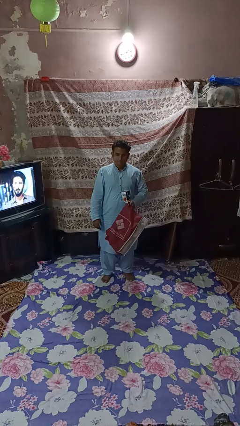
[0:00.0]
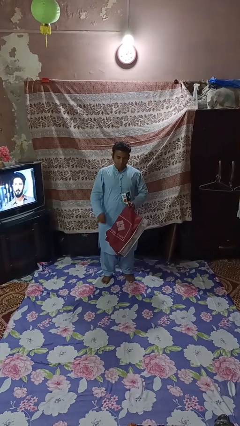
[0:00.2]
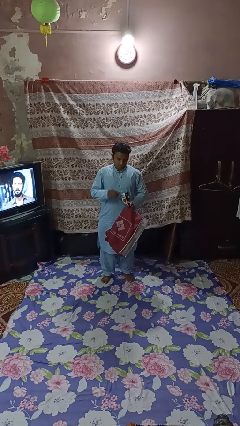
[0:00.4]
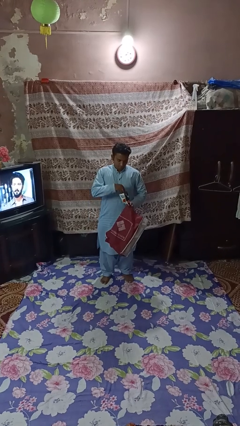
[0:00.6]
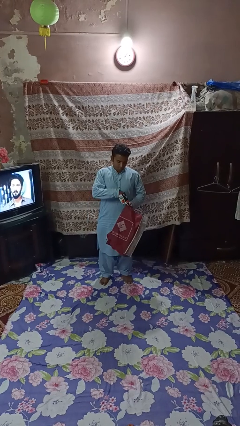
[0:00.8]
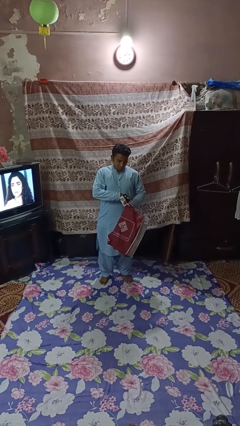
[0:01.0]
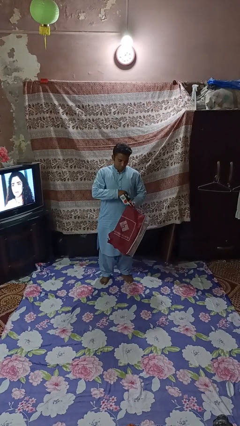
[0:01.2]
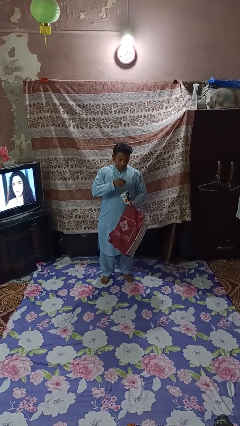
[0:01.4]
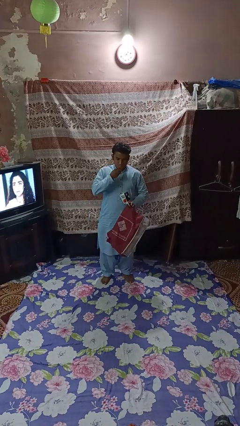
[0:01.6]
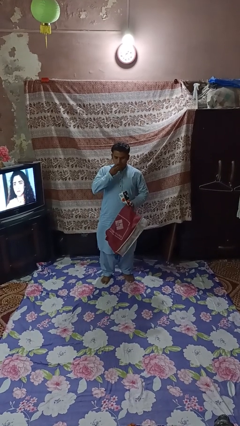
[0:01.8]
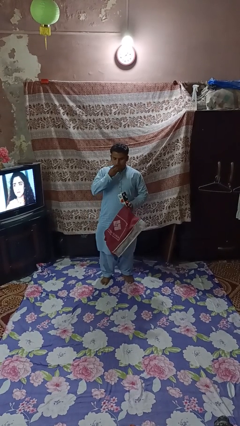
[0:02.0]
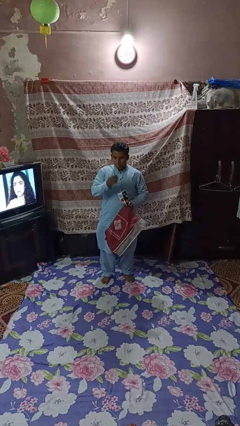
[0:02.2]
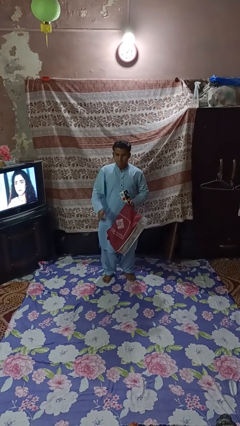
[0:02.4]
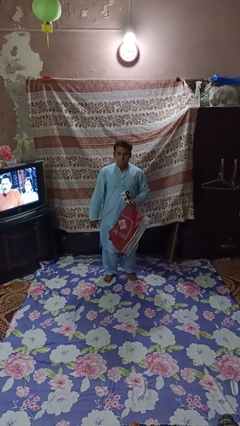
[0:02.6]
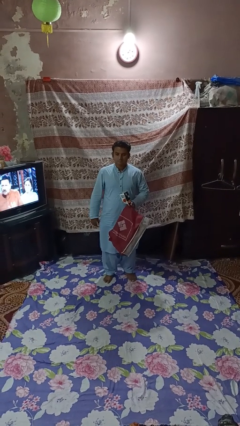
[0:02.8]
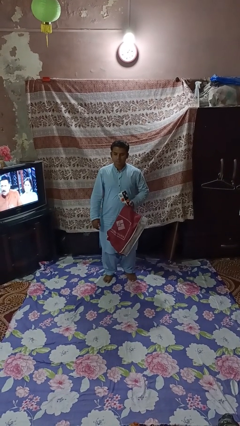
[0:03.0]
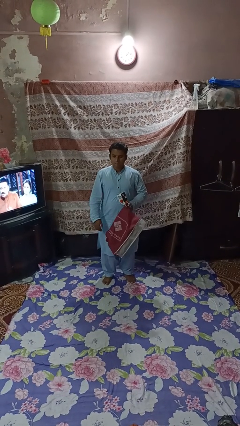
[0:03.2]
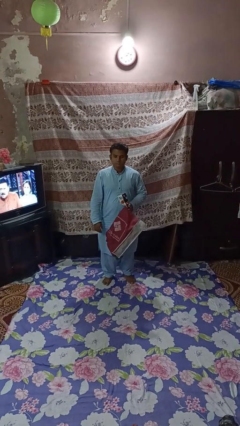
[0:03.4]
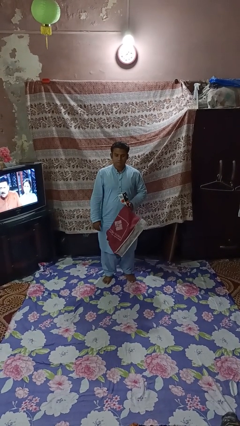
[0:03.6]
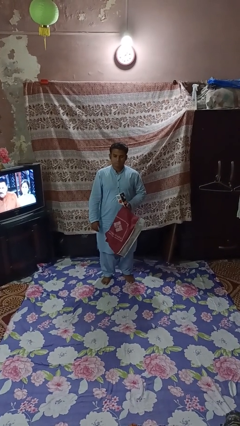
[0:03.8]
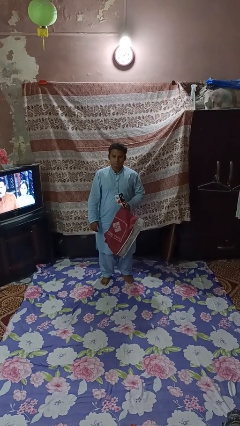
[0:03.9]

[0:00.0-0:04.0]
person eats snack from bag

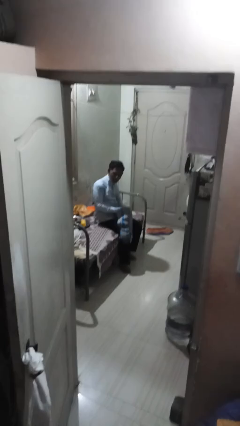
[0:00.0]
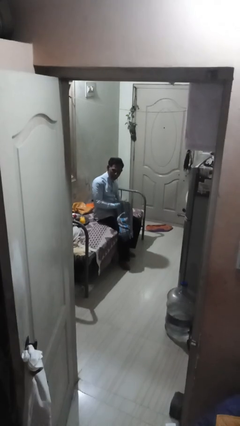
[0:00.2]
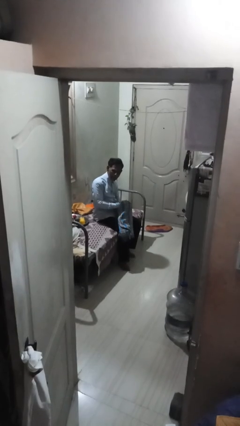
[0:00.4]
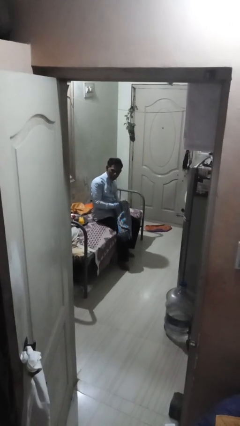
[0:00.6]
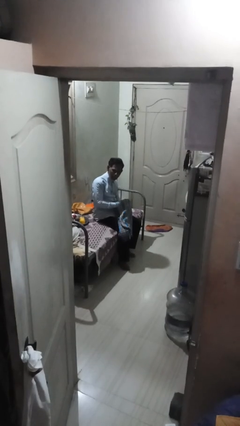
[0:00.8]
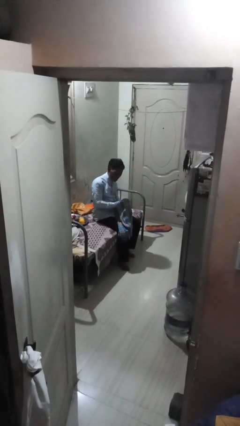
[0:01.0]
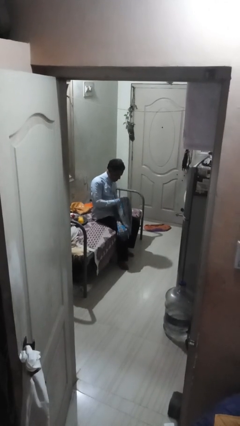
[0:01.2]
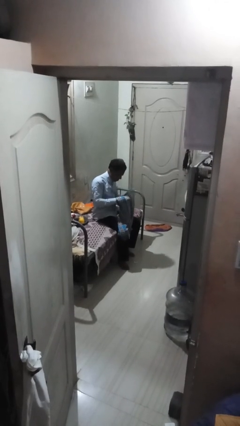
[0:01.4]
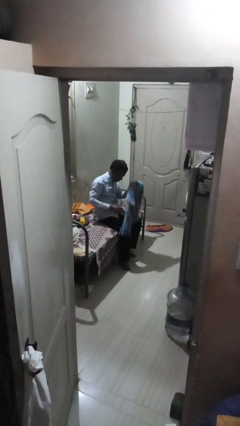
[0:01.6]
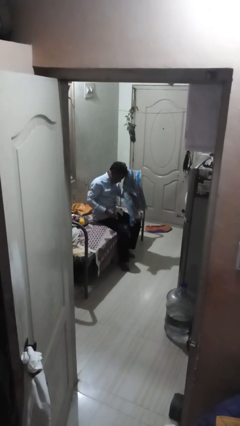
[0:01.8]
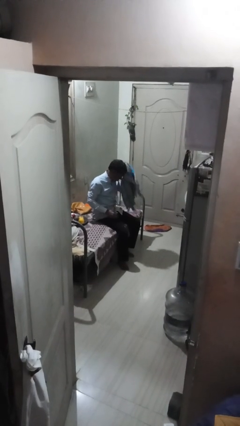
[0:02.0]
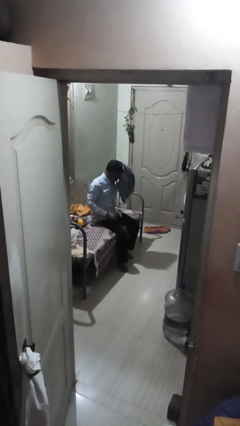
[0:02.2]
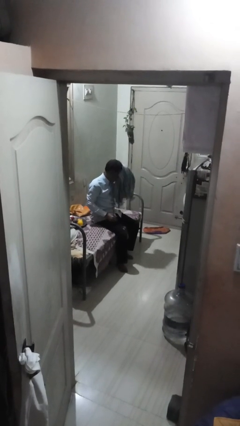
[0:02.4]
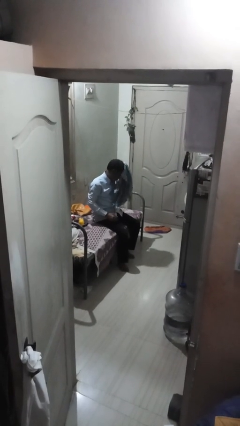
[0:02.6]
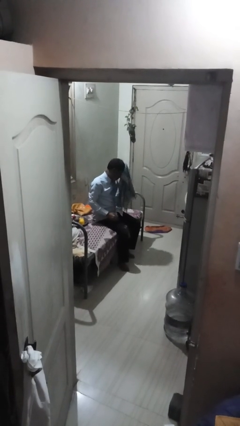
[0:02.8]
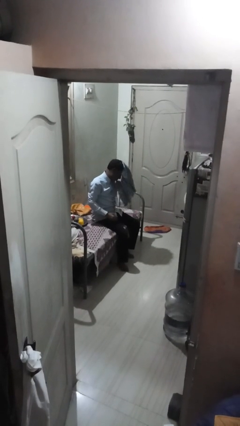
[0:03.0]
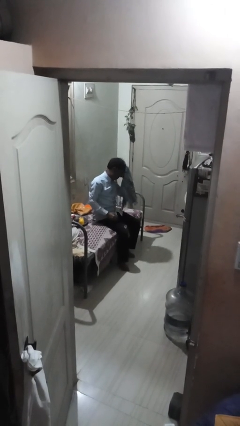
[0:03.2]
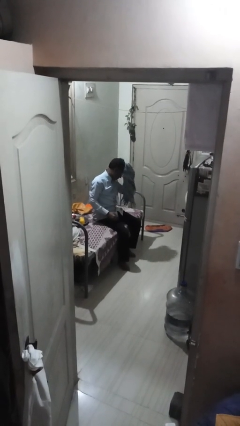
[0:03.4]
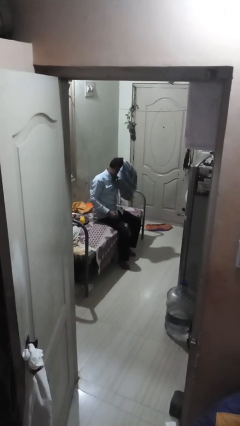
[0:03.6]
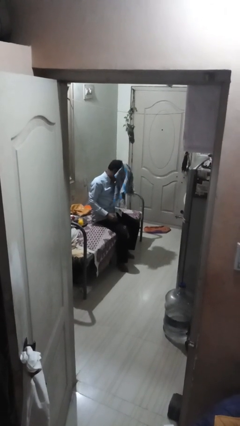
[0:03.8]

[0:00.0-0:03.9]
person dries hair with towel

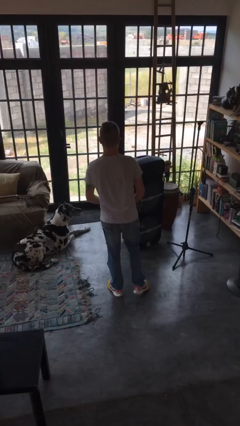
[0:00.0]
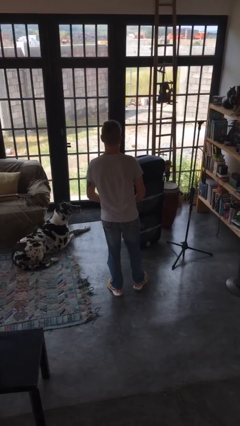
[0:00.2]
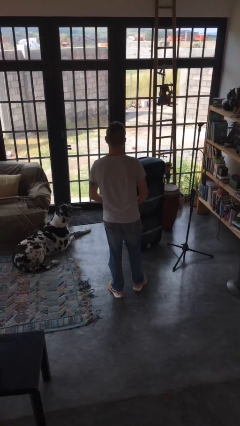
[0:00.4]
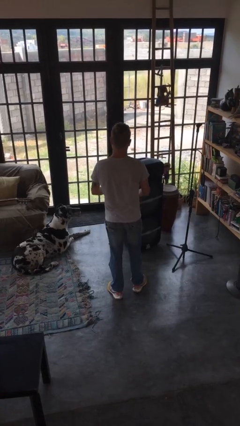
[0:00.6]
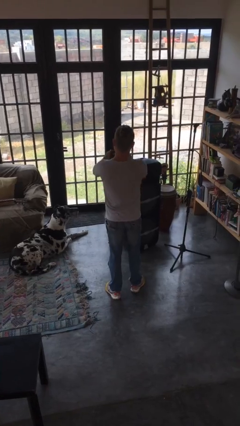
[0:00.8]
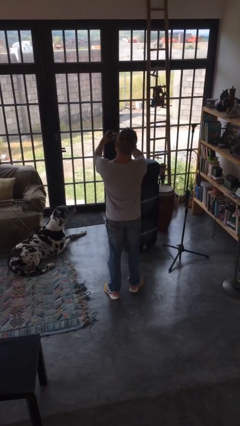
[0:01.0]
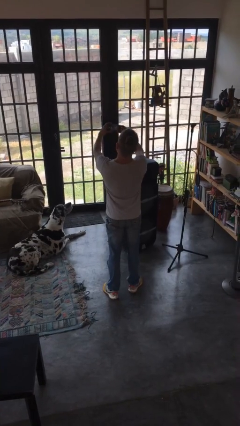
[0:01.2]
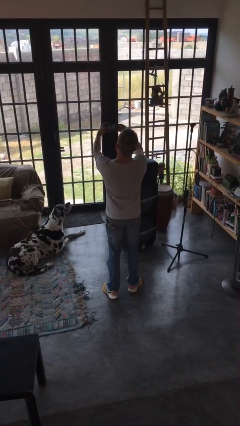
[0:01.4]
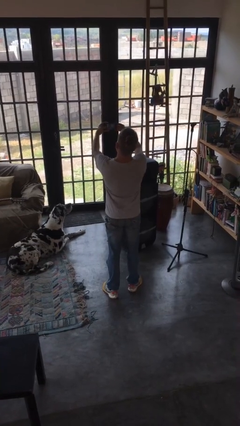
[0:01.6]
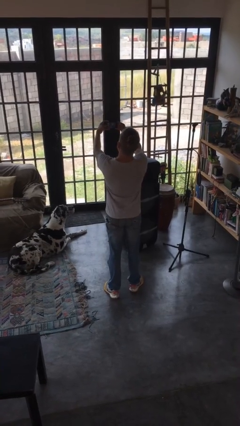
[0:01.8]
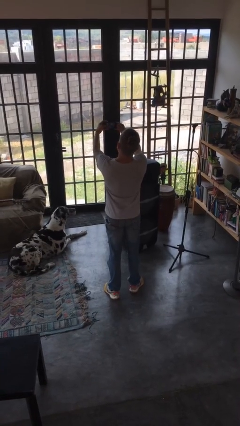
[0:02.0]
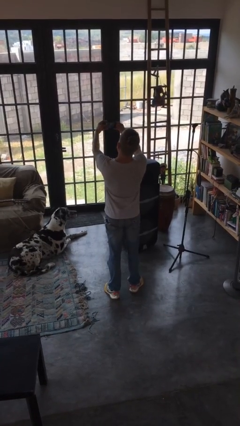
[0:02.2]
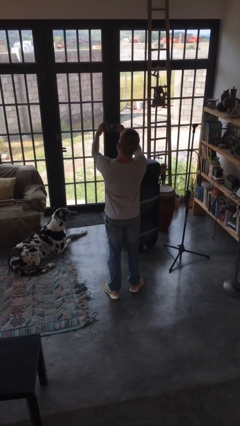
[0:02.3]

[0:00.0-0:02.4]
person takes selfie

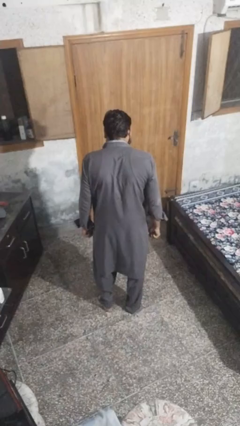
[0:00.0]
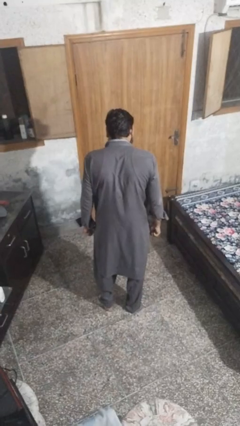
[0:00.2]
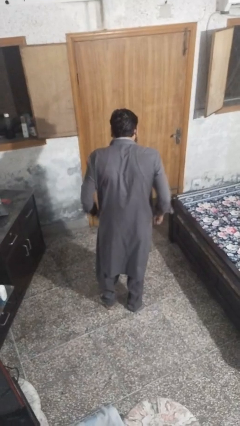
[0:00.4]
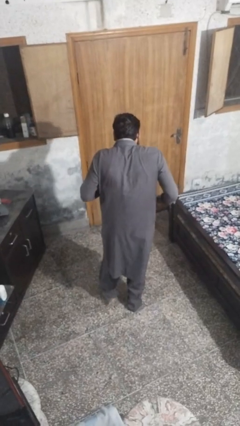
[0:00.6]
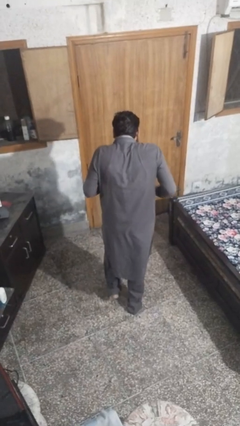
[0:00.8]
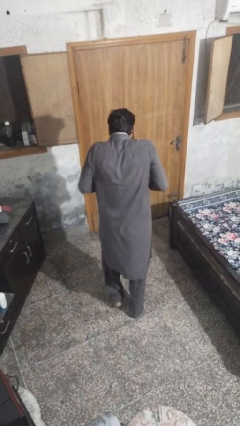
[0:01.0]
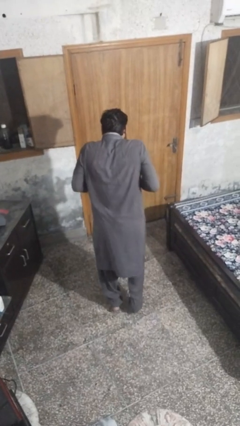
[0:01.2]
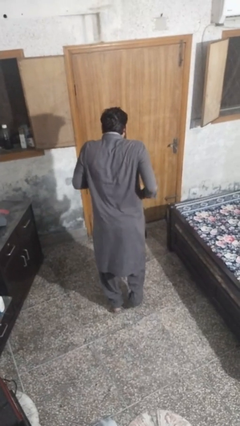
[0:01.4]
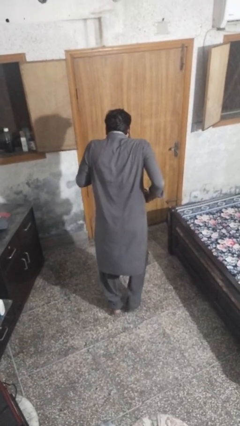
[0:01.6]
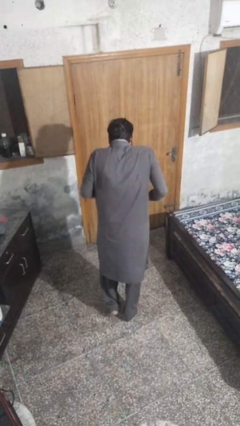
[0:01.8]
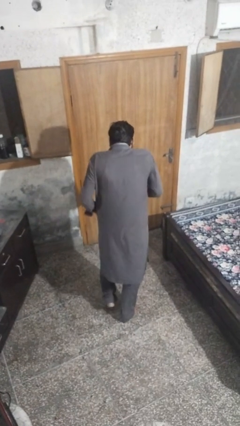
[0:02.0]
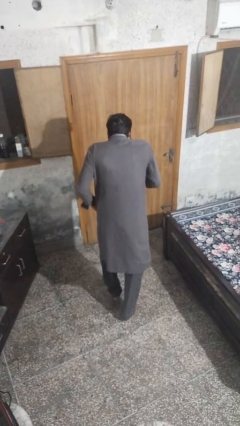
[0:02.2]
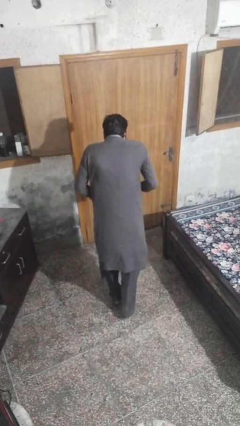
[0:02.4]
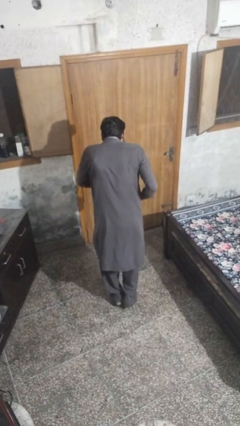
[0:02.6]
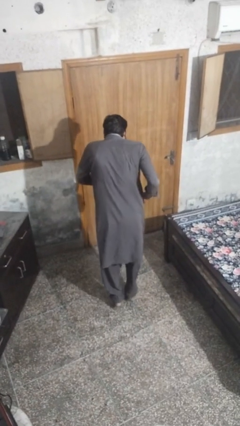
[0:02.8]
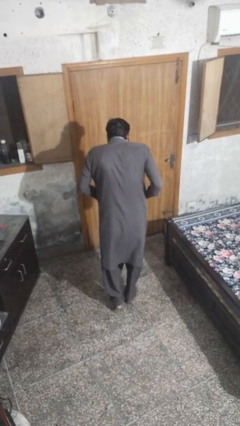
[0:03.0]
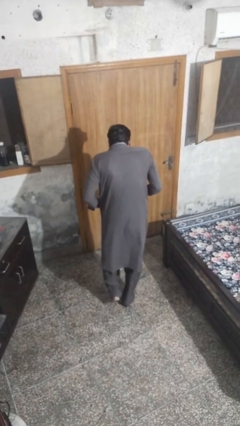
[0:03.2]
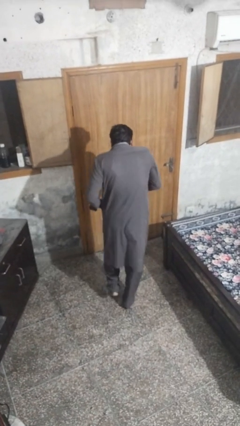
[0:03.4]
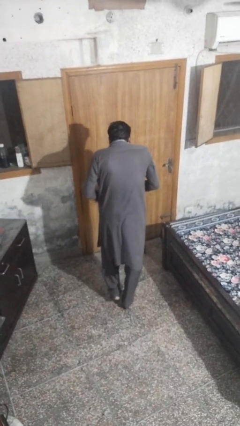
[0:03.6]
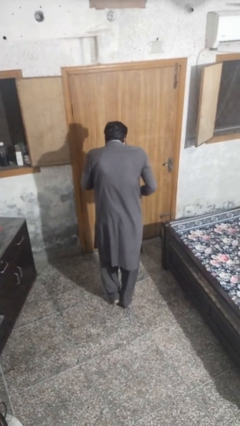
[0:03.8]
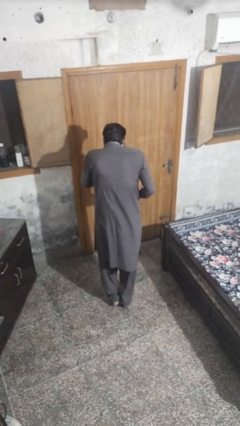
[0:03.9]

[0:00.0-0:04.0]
person walks tiptoe

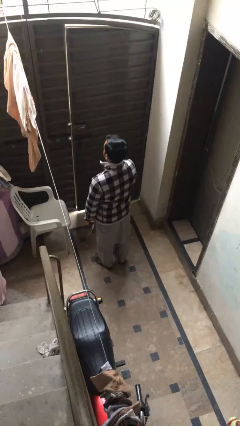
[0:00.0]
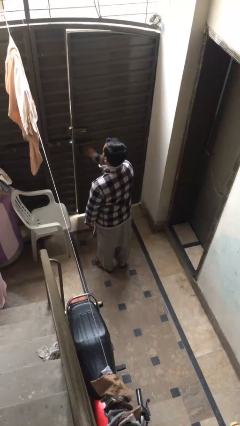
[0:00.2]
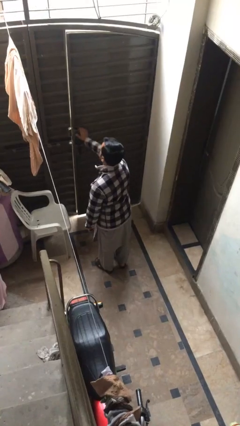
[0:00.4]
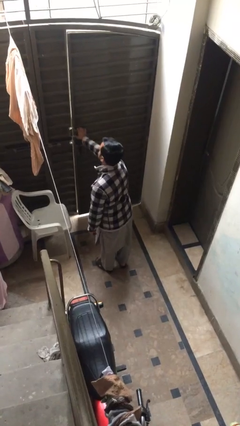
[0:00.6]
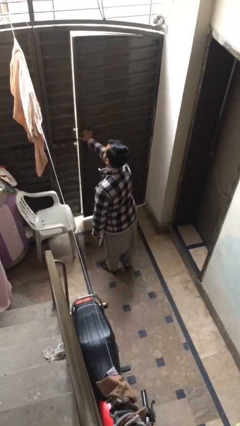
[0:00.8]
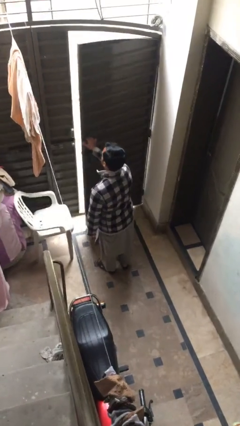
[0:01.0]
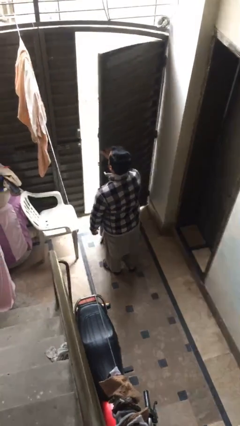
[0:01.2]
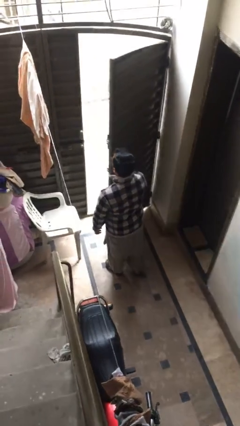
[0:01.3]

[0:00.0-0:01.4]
person opens facility door

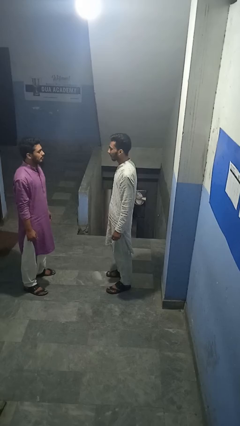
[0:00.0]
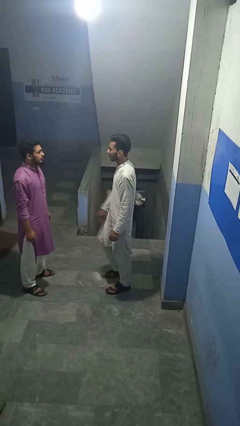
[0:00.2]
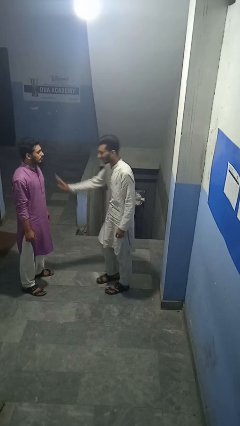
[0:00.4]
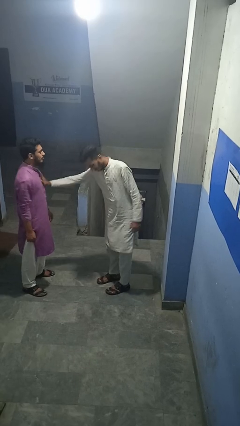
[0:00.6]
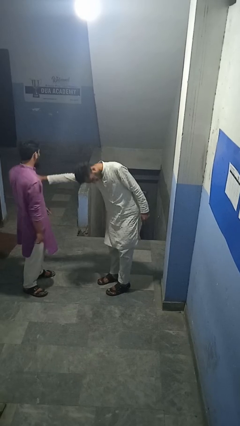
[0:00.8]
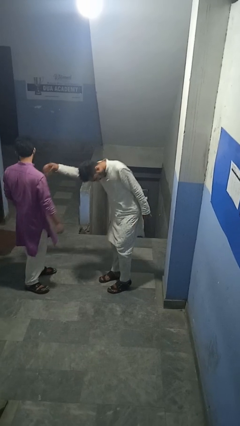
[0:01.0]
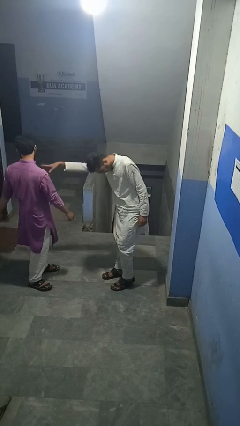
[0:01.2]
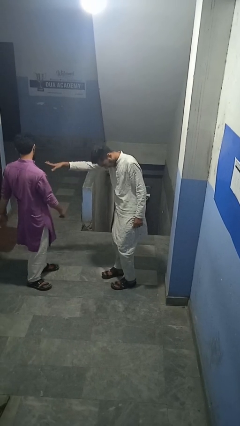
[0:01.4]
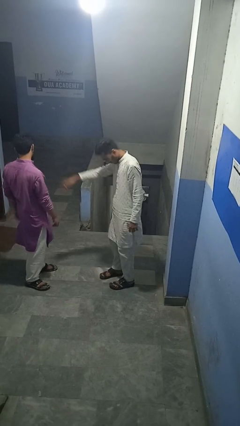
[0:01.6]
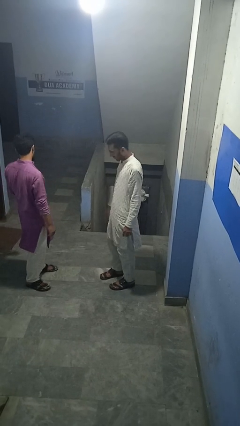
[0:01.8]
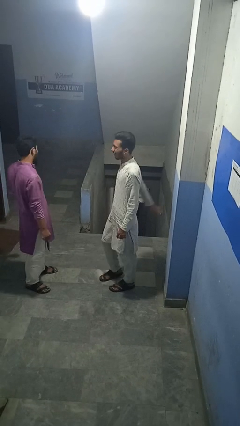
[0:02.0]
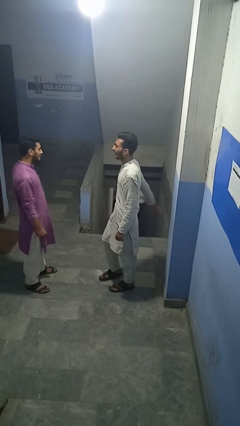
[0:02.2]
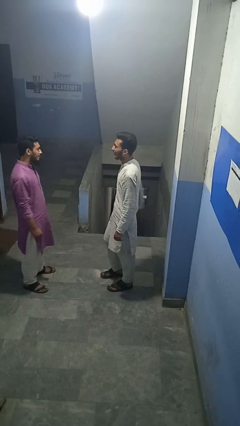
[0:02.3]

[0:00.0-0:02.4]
person shoves person
